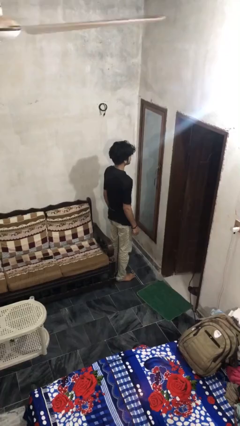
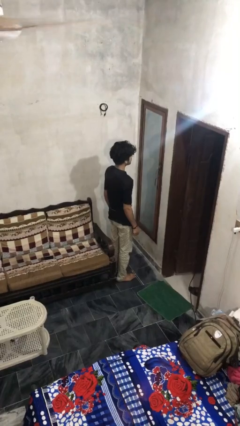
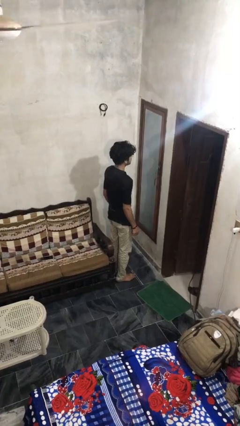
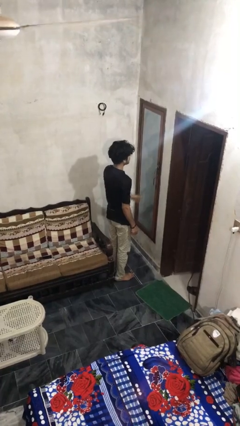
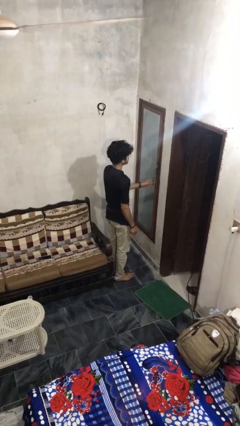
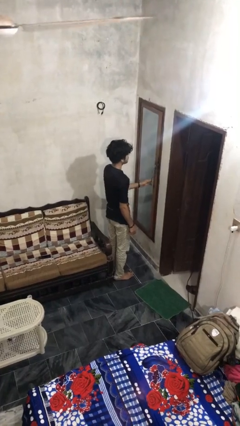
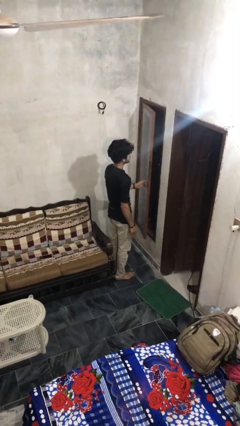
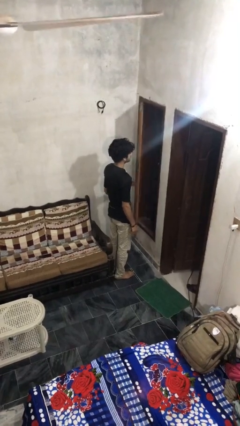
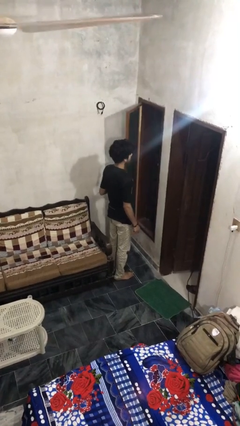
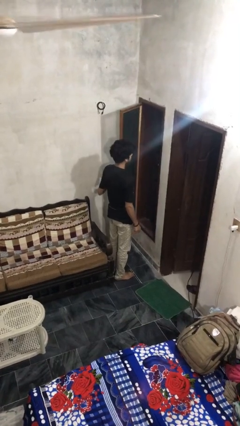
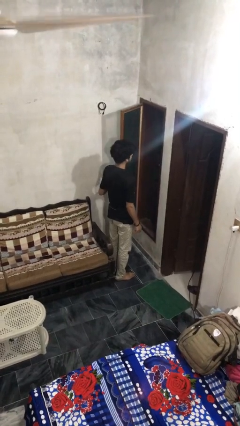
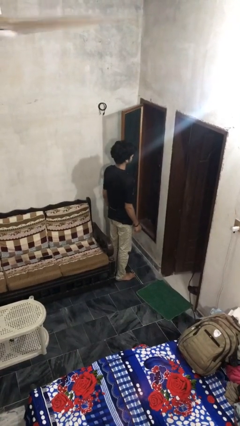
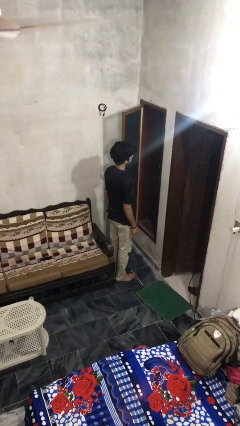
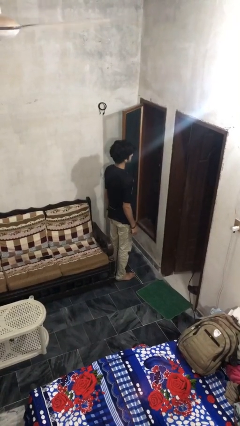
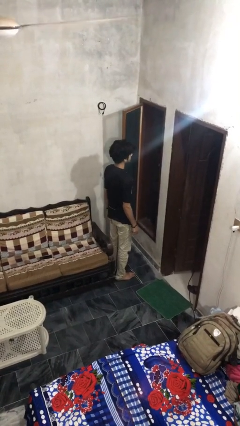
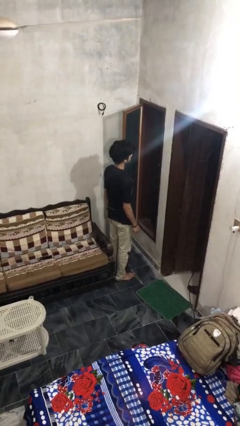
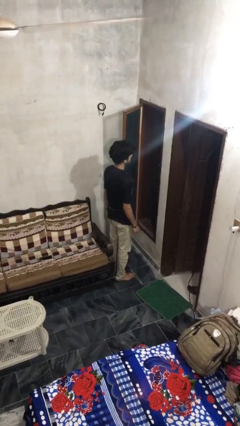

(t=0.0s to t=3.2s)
person opens home window

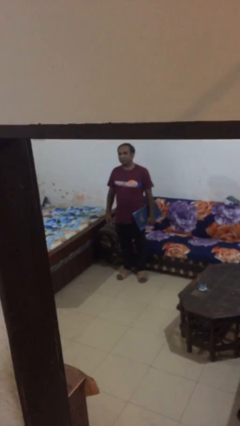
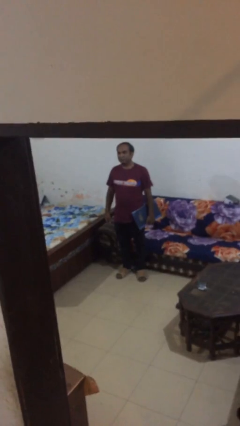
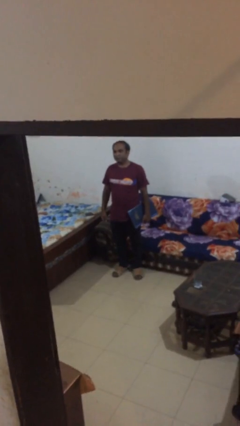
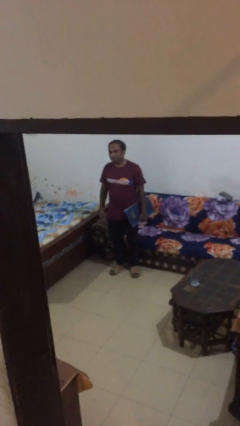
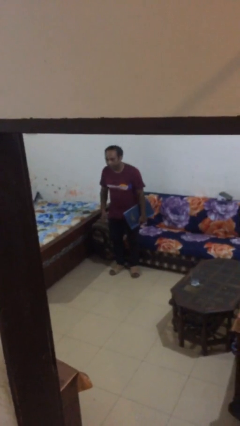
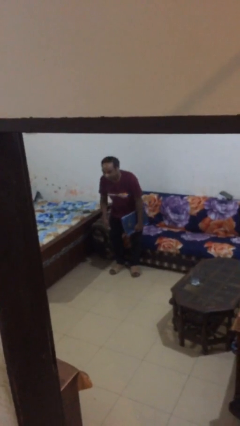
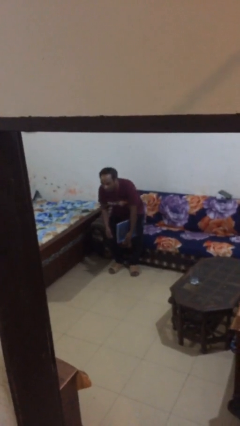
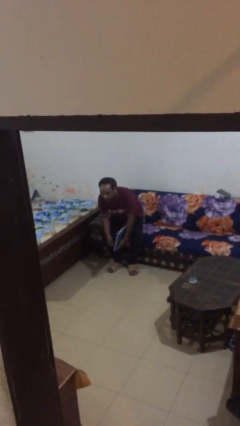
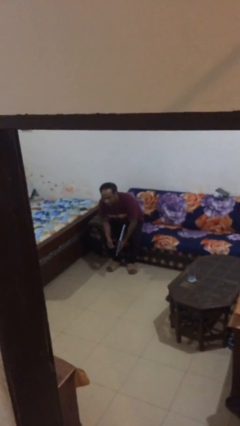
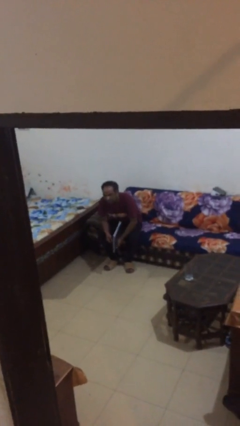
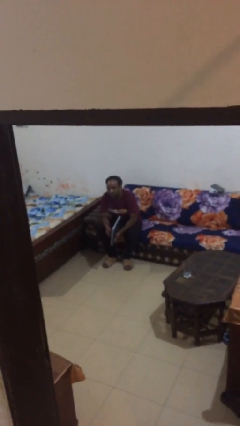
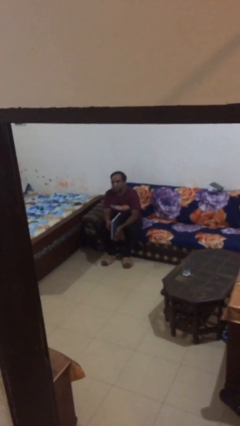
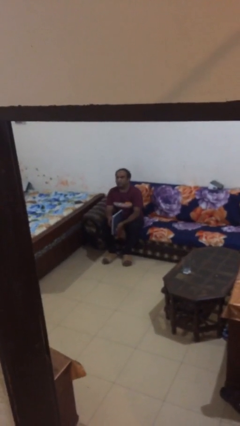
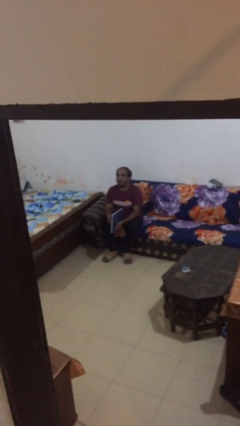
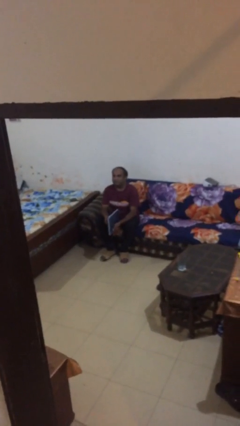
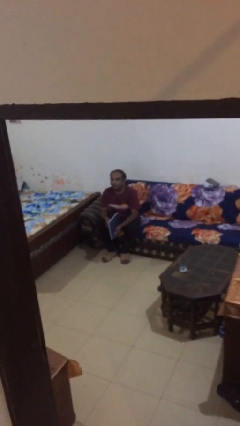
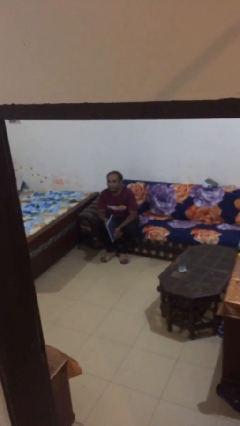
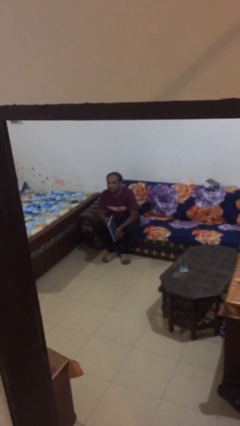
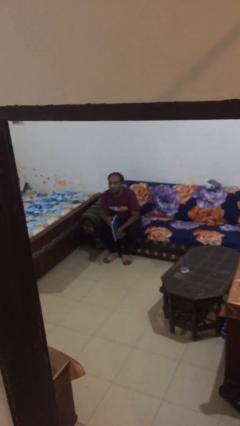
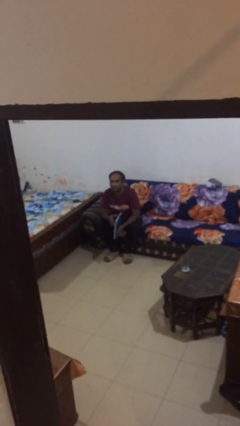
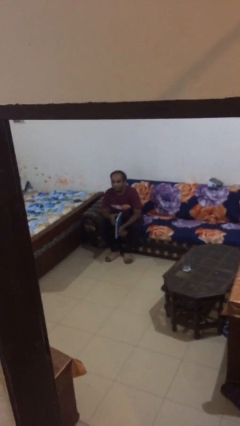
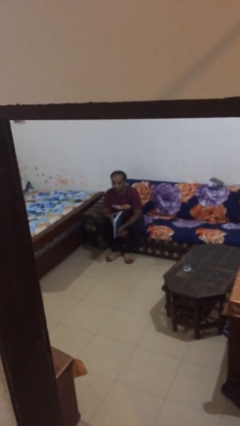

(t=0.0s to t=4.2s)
person sits down

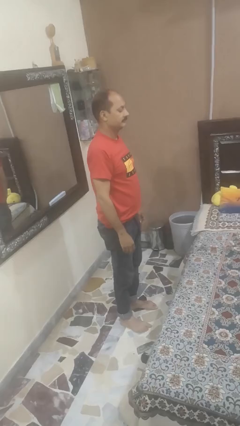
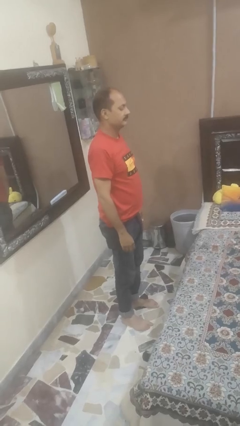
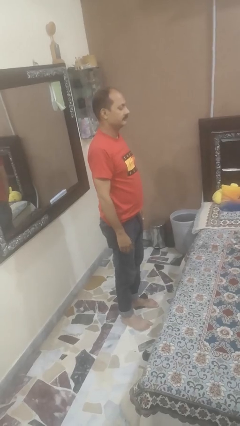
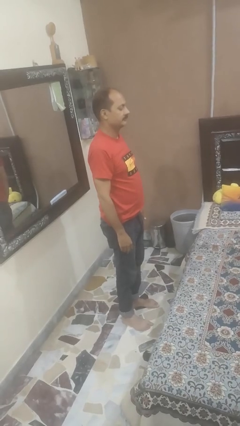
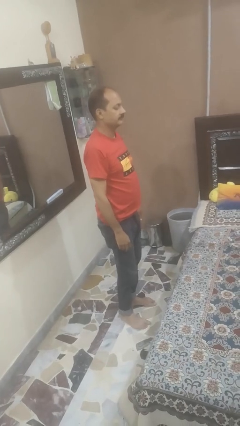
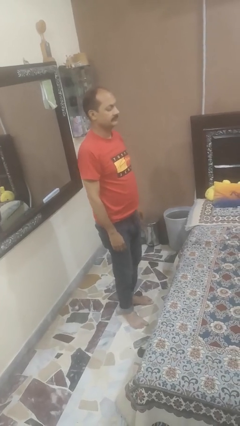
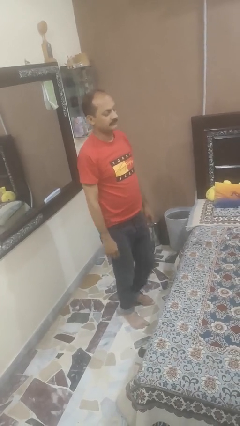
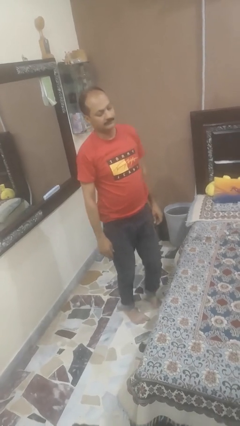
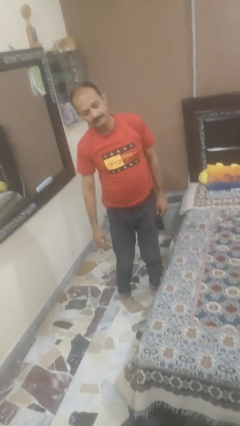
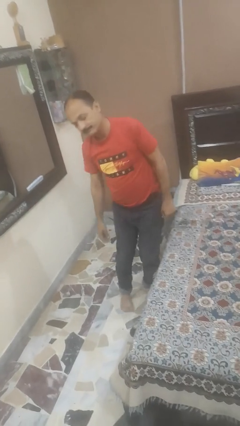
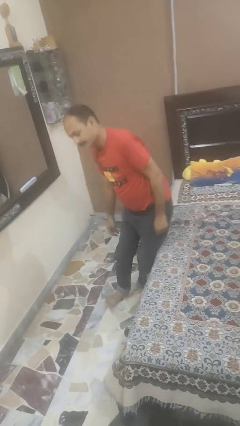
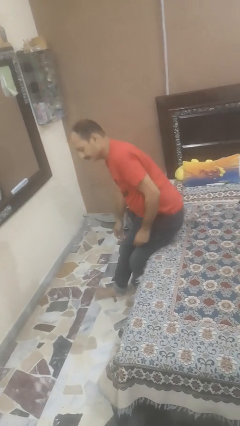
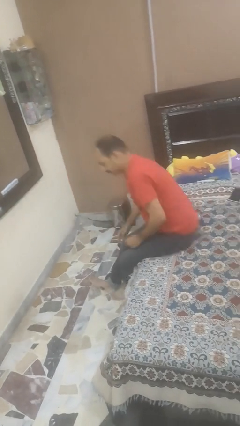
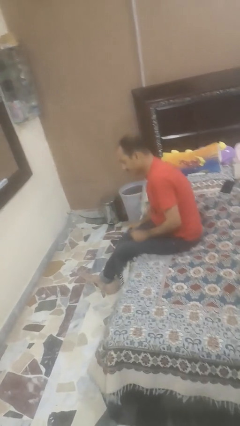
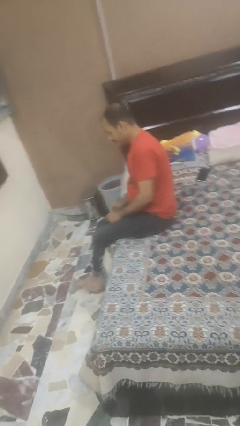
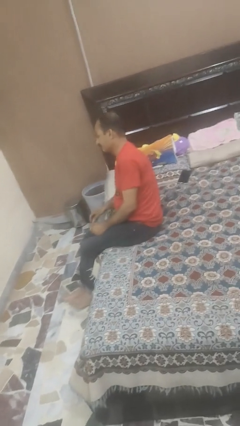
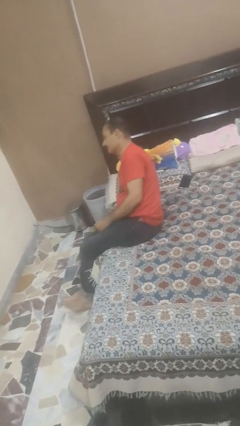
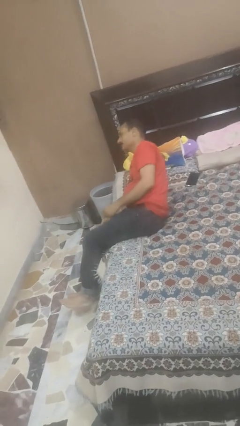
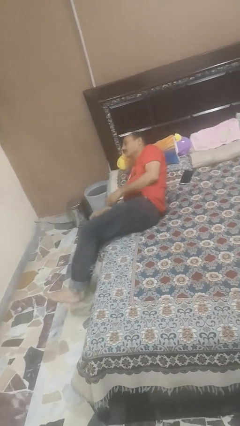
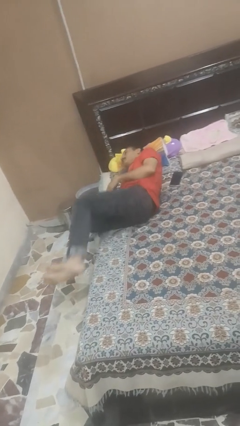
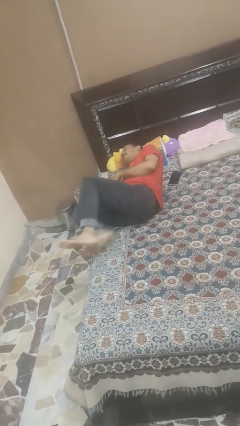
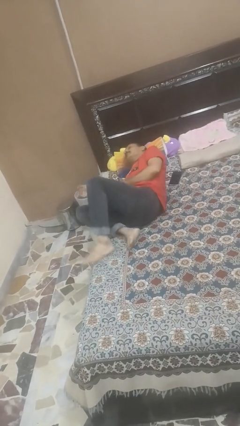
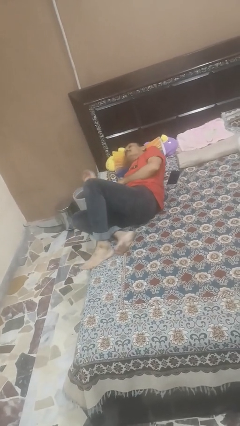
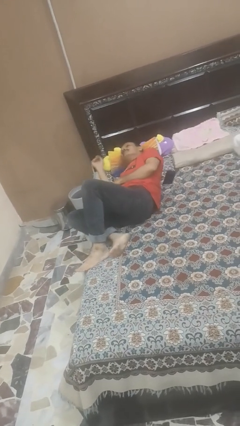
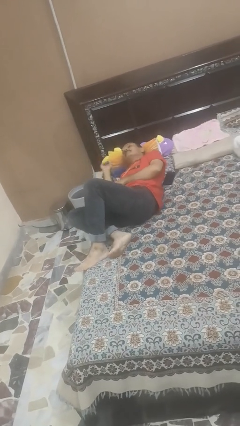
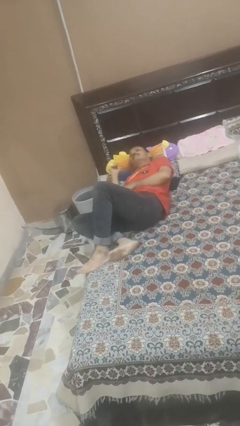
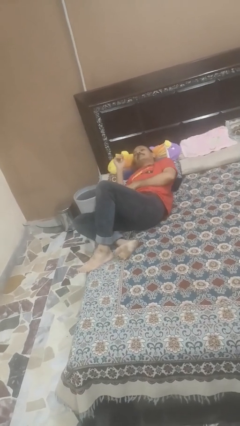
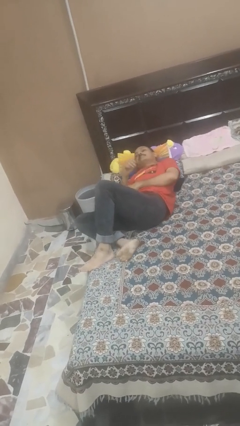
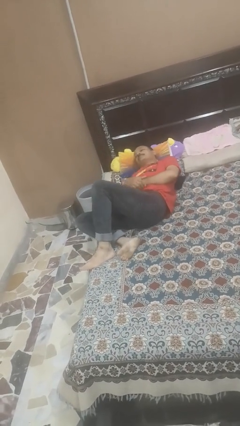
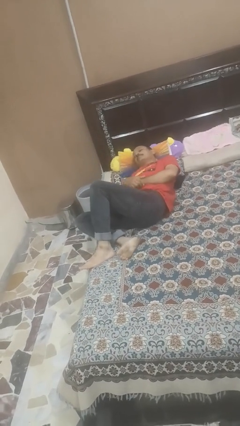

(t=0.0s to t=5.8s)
person lies down on bed

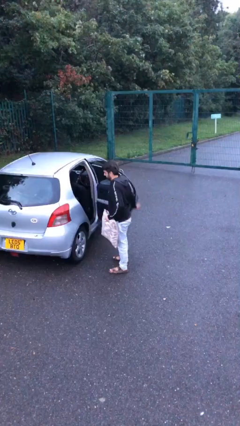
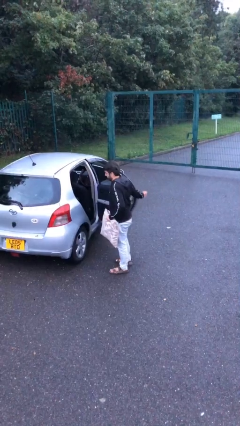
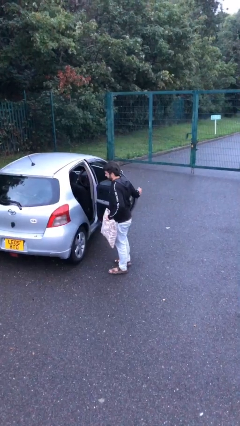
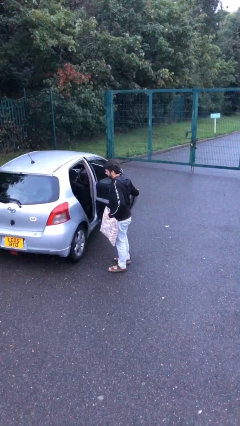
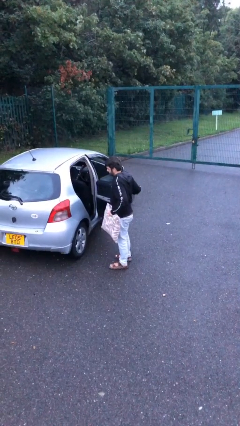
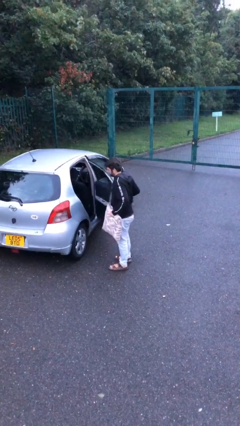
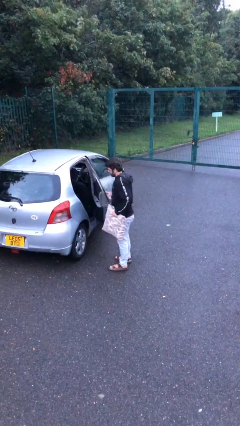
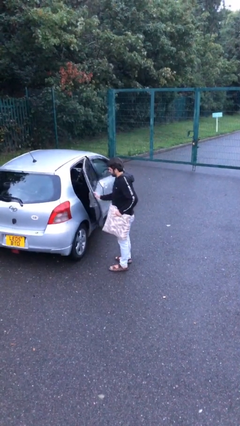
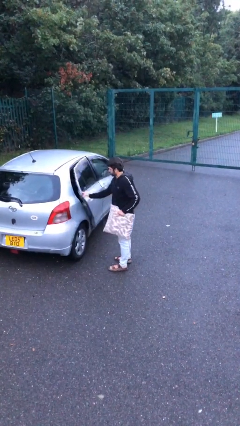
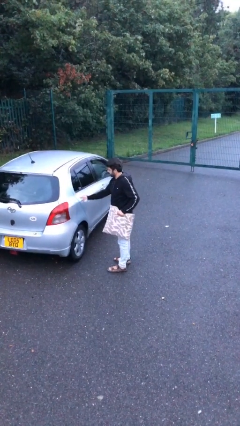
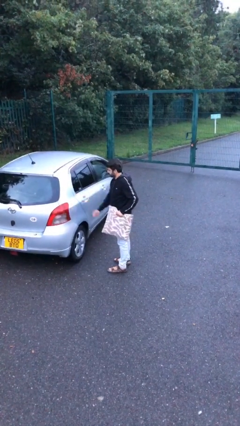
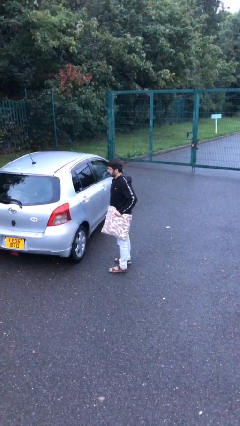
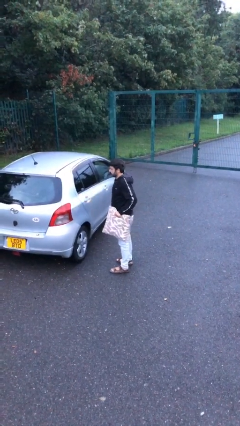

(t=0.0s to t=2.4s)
person closes car door

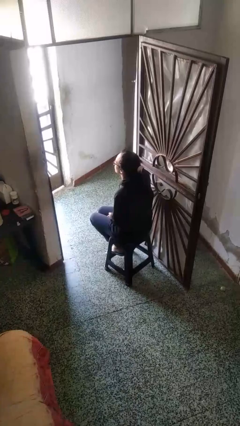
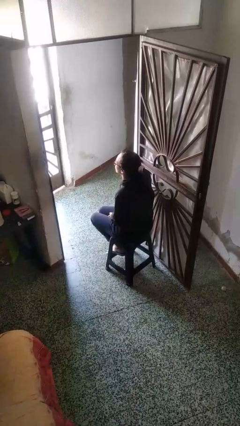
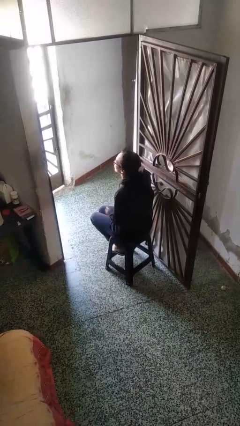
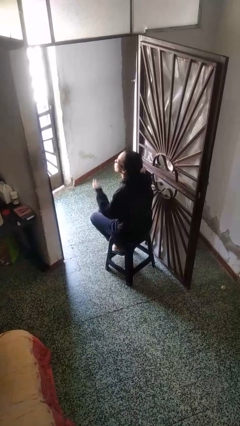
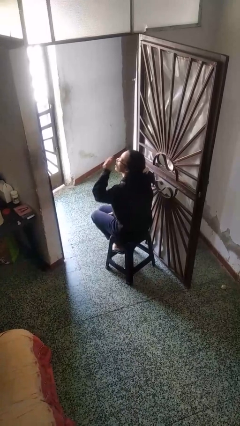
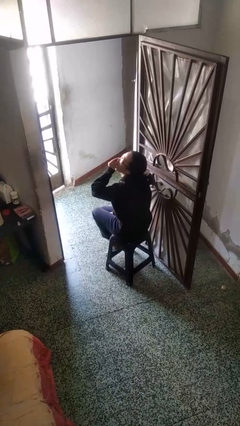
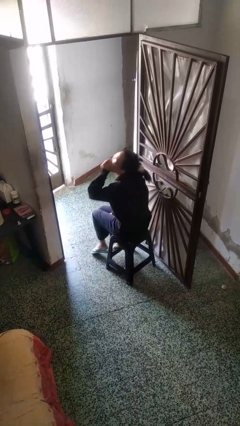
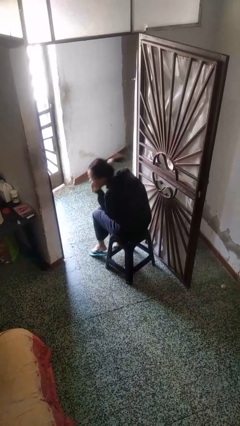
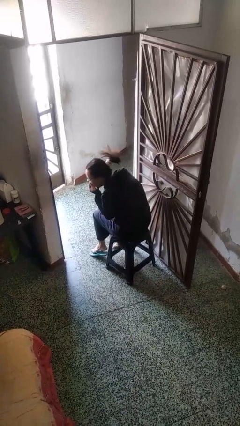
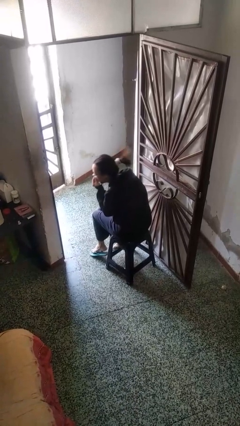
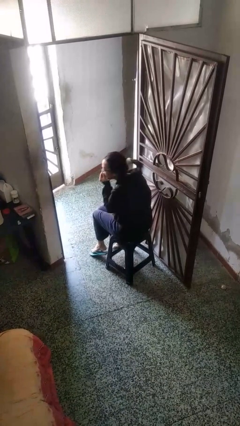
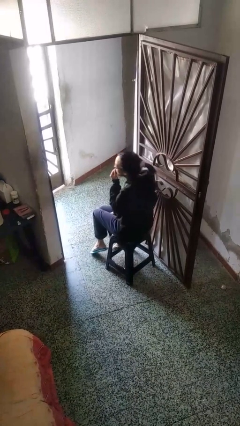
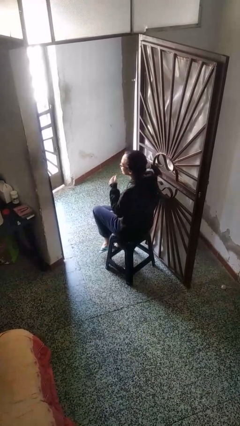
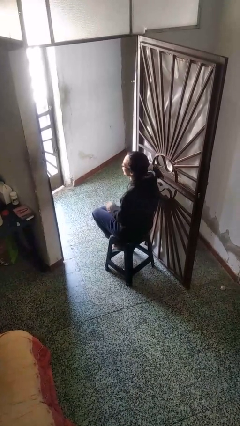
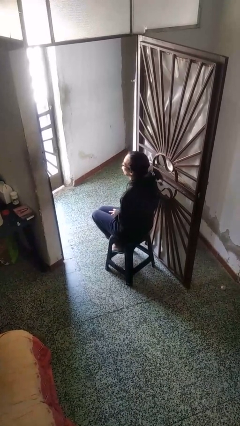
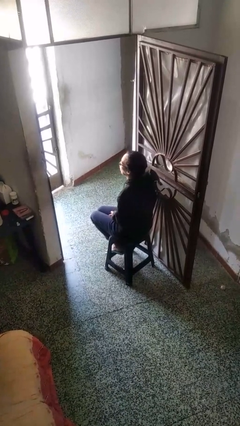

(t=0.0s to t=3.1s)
person sneezes into hand
